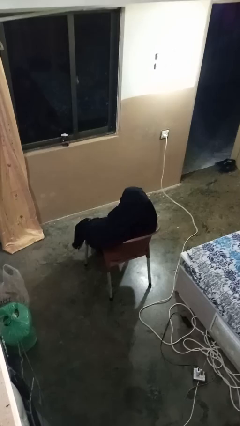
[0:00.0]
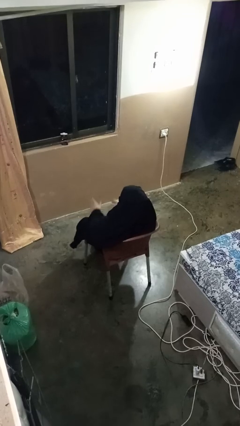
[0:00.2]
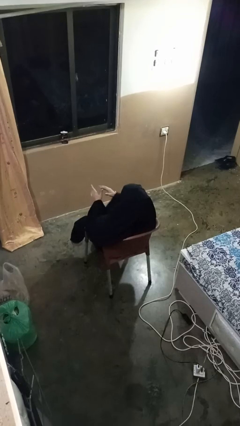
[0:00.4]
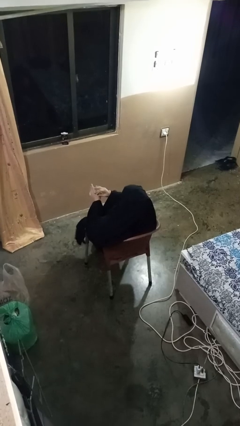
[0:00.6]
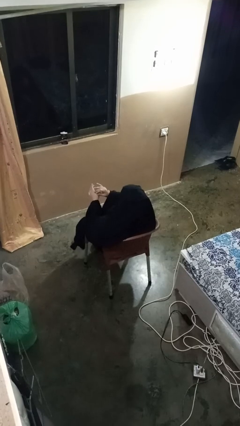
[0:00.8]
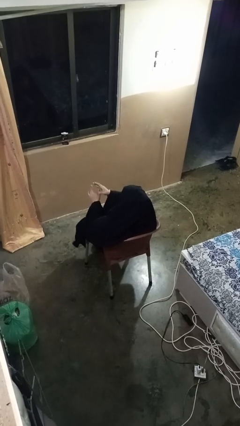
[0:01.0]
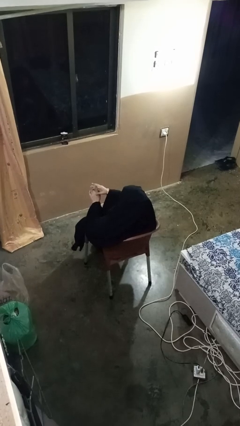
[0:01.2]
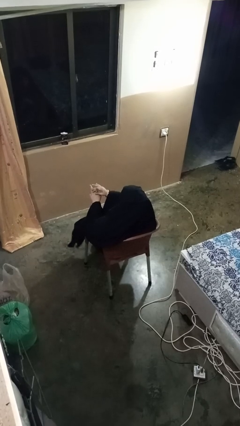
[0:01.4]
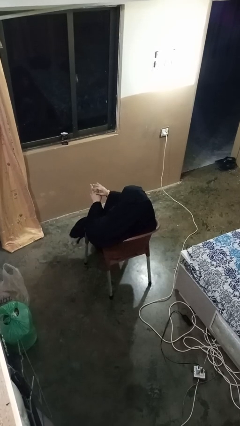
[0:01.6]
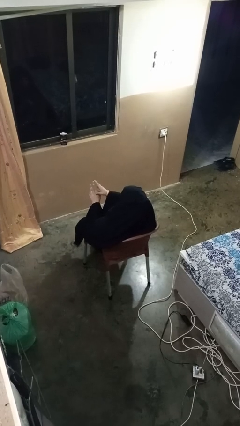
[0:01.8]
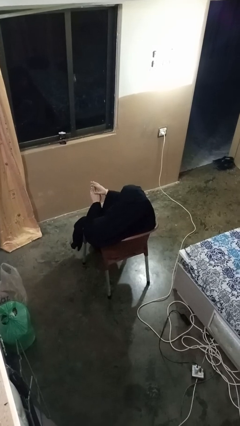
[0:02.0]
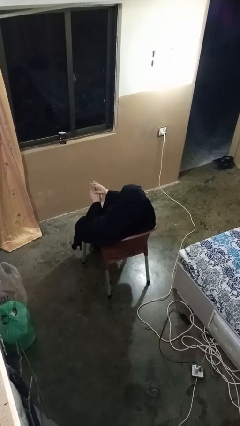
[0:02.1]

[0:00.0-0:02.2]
person cracks knuckles

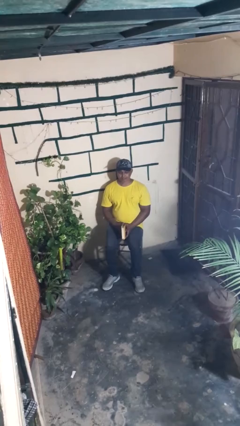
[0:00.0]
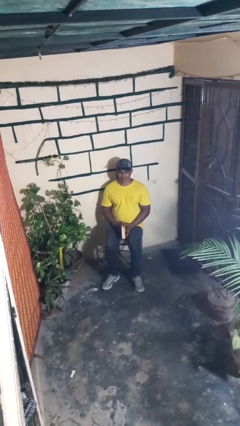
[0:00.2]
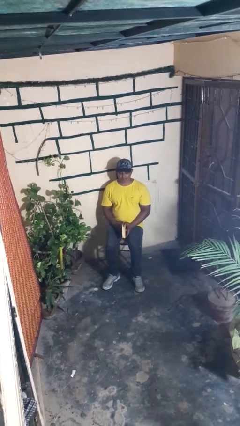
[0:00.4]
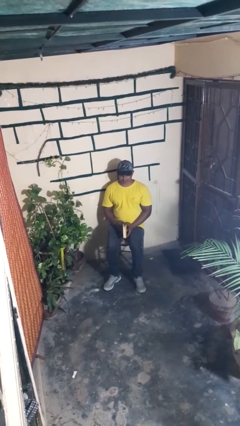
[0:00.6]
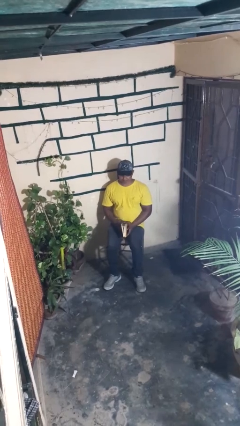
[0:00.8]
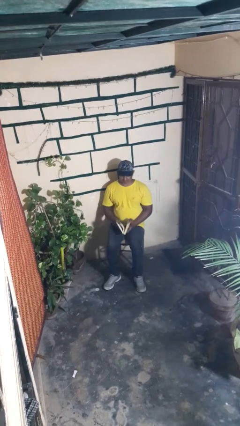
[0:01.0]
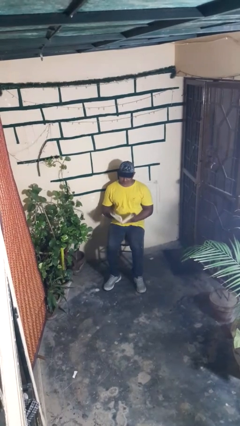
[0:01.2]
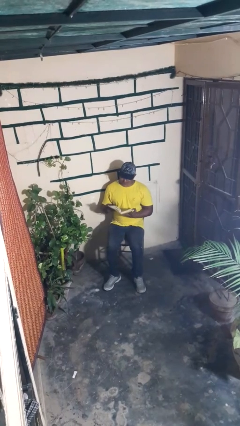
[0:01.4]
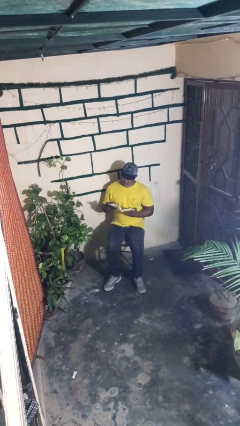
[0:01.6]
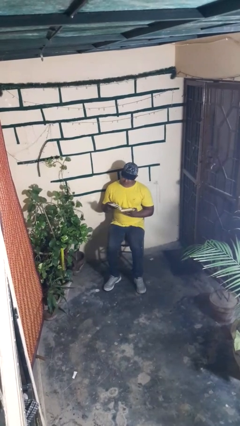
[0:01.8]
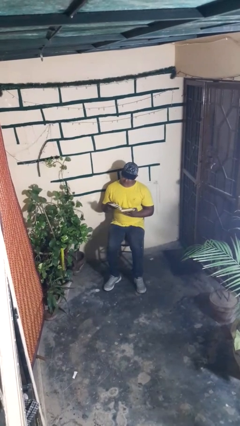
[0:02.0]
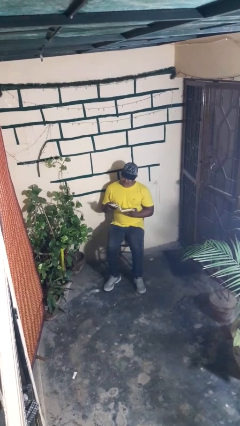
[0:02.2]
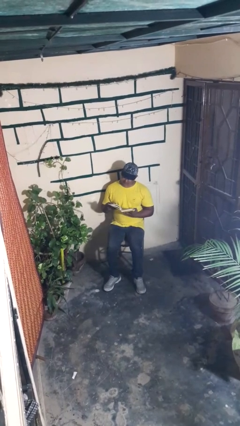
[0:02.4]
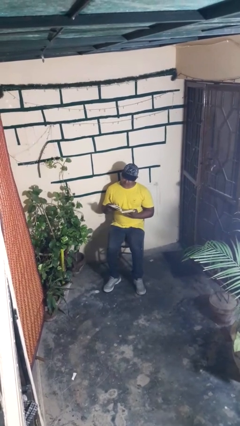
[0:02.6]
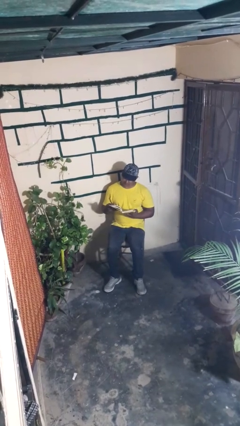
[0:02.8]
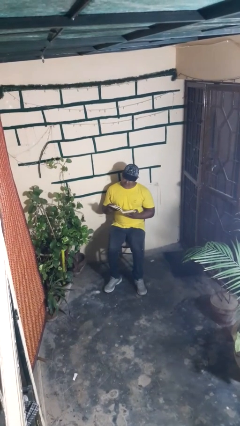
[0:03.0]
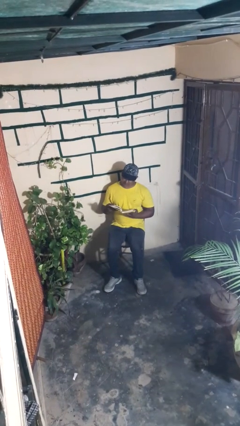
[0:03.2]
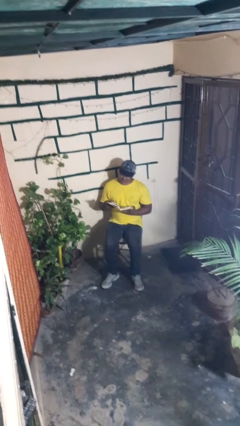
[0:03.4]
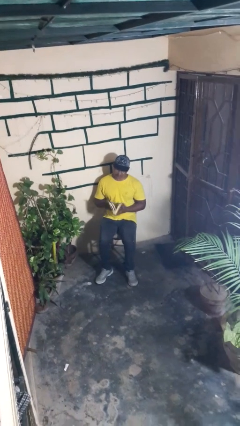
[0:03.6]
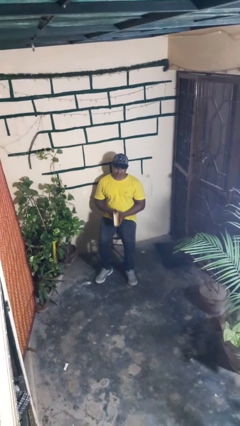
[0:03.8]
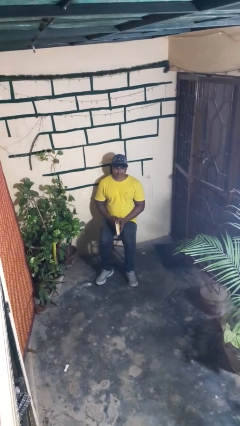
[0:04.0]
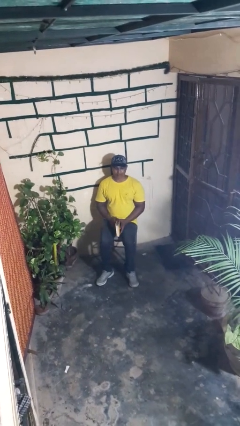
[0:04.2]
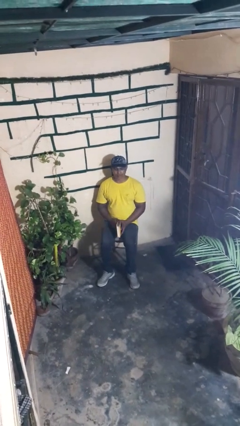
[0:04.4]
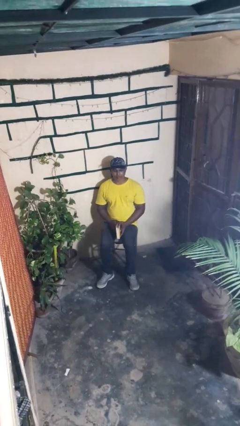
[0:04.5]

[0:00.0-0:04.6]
person reads book

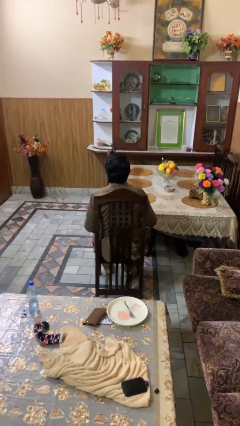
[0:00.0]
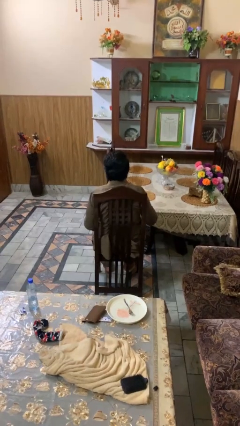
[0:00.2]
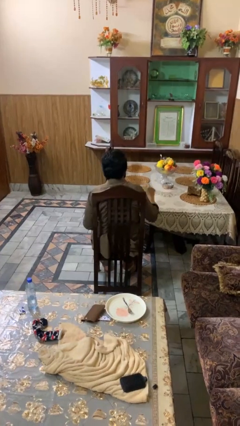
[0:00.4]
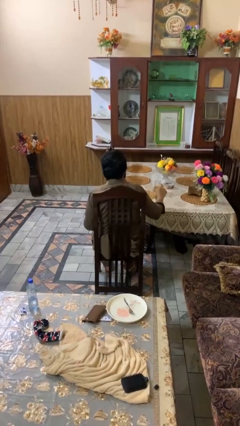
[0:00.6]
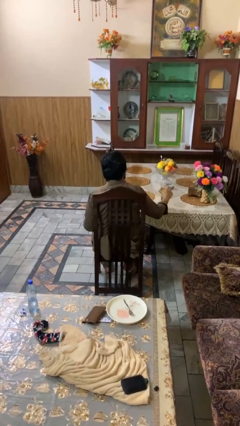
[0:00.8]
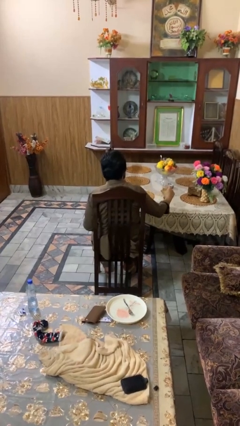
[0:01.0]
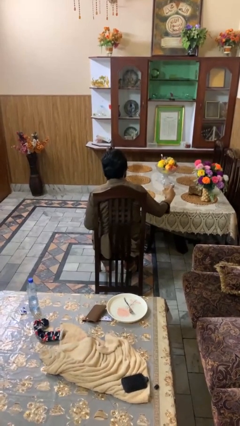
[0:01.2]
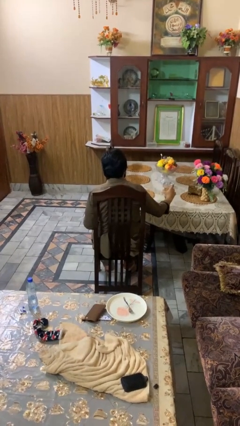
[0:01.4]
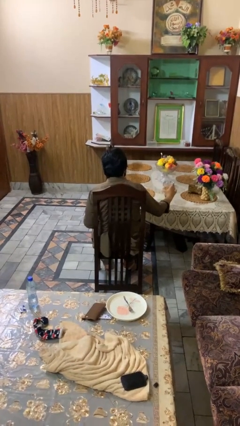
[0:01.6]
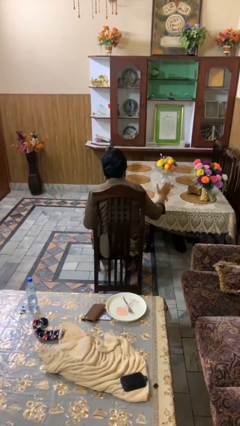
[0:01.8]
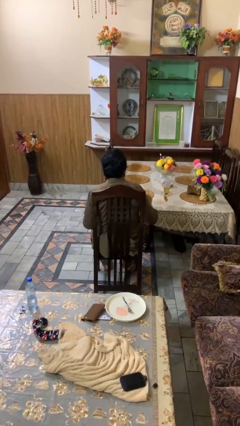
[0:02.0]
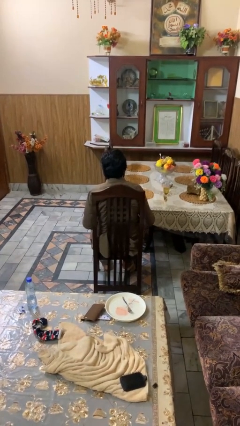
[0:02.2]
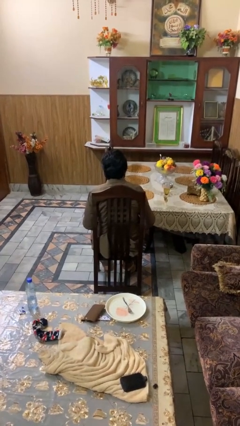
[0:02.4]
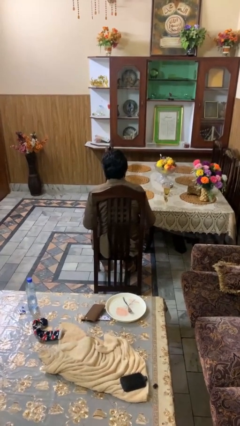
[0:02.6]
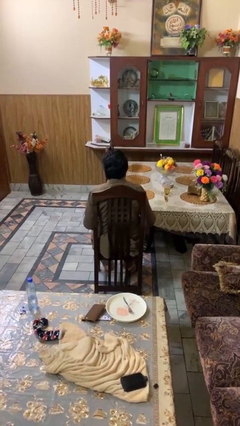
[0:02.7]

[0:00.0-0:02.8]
person puts down object on table

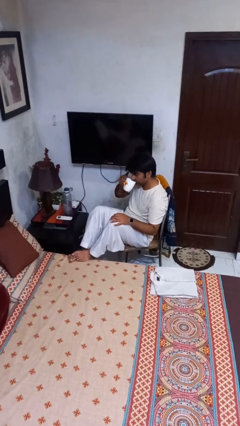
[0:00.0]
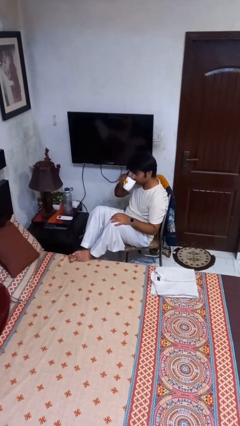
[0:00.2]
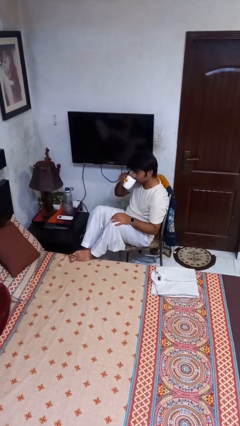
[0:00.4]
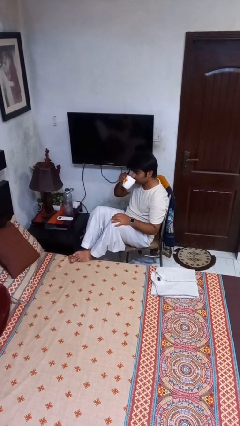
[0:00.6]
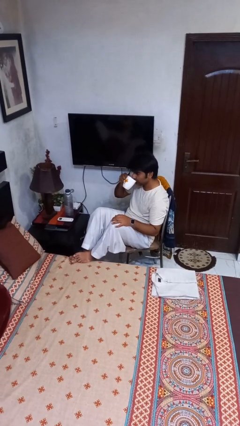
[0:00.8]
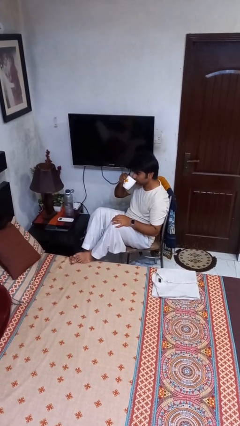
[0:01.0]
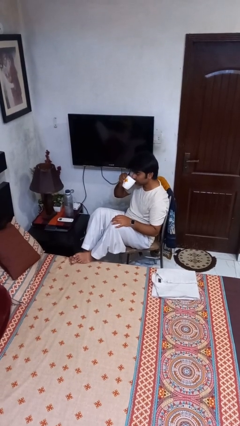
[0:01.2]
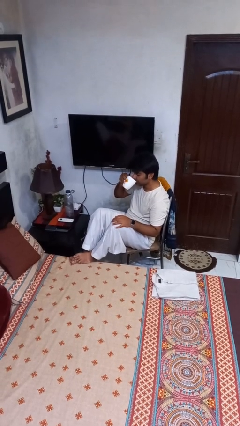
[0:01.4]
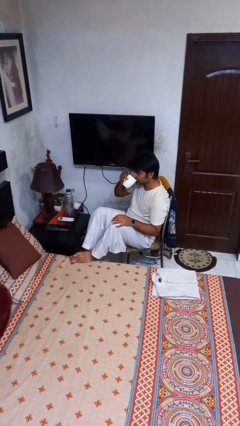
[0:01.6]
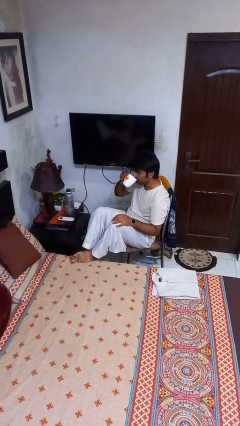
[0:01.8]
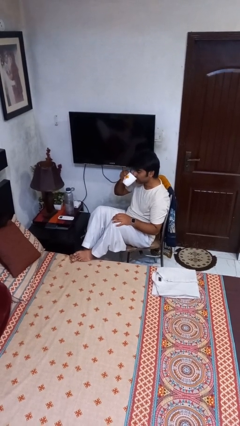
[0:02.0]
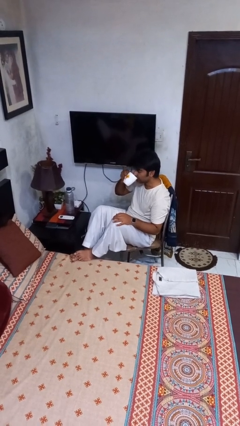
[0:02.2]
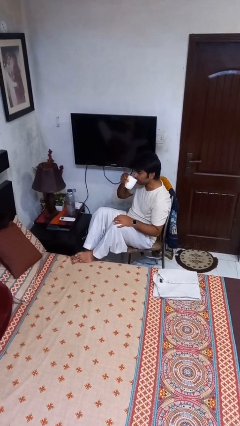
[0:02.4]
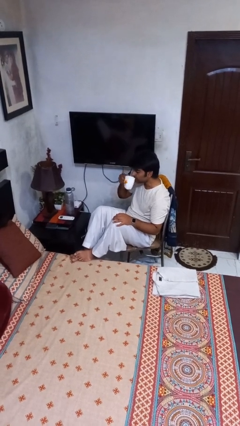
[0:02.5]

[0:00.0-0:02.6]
person drinks from mug

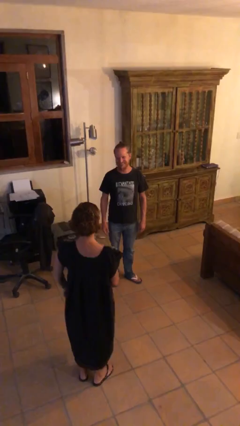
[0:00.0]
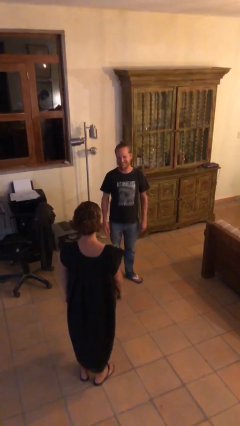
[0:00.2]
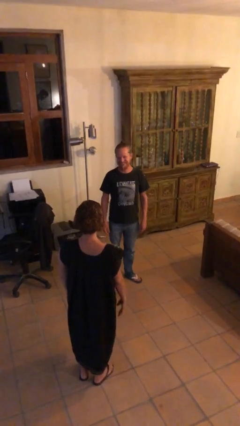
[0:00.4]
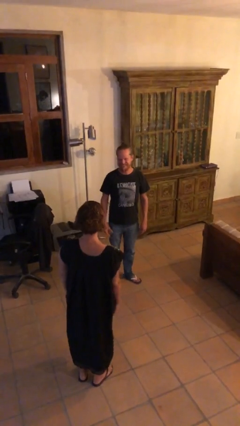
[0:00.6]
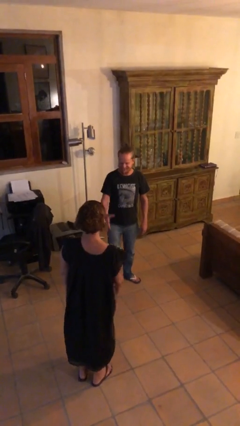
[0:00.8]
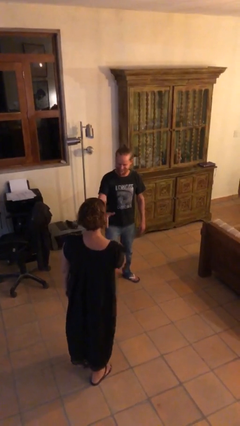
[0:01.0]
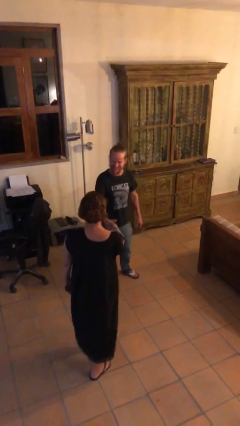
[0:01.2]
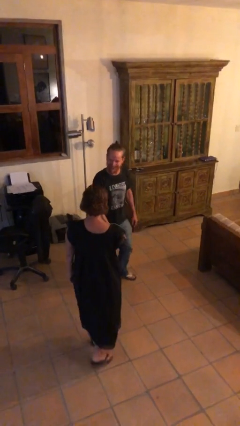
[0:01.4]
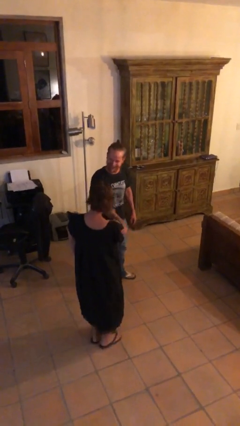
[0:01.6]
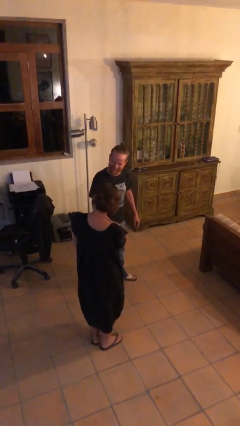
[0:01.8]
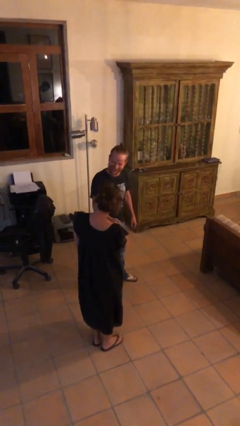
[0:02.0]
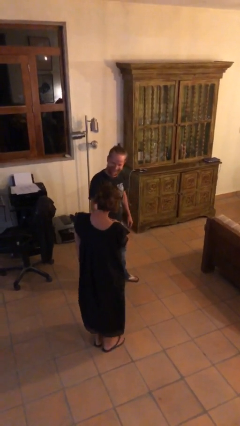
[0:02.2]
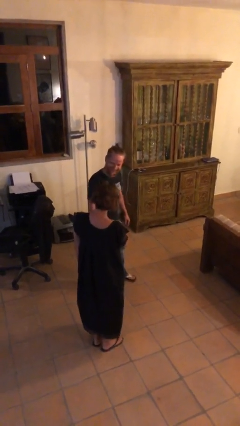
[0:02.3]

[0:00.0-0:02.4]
person shakes hand

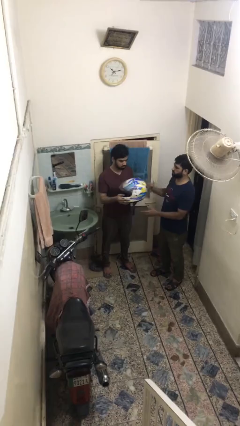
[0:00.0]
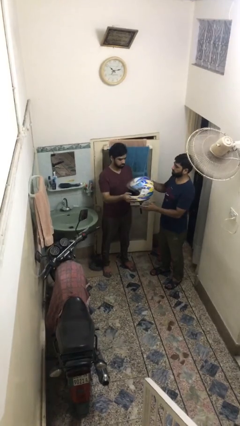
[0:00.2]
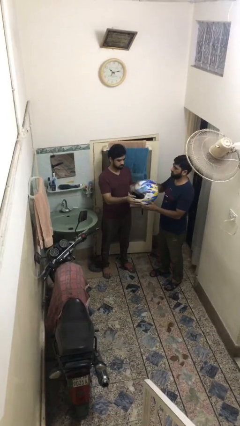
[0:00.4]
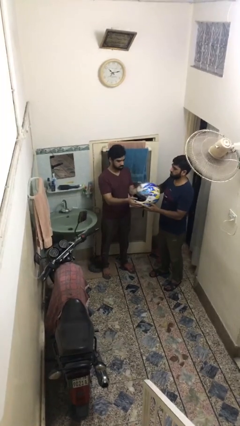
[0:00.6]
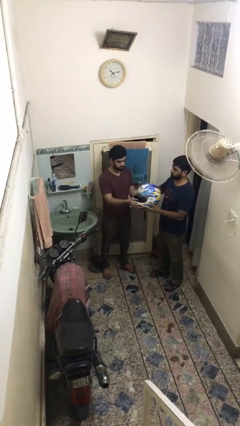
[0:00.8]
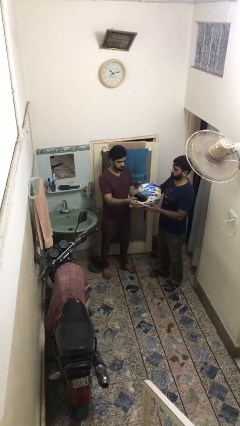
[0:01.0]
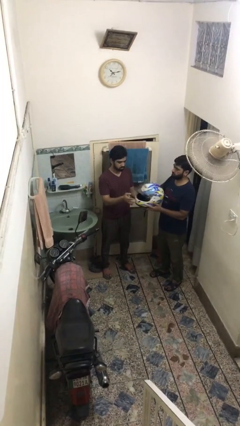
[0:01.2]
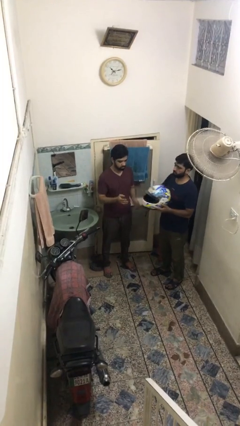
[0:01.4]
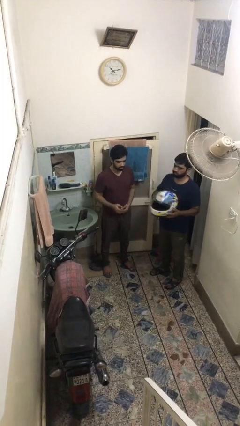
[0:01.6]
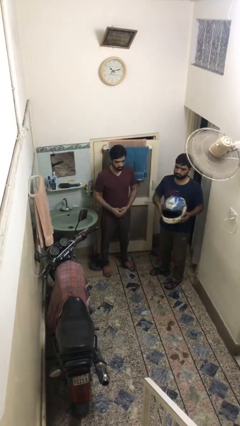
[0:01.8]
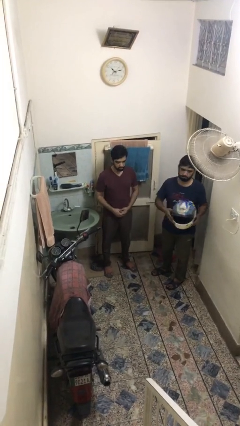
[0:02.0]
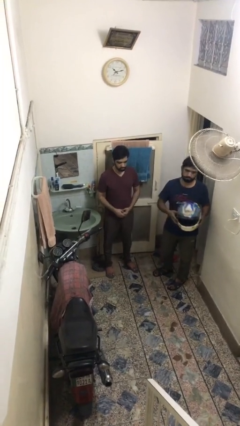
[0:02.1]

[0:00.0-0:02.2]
person transfers object to person

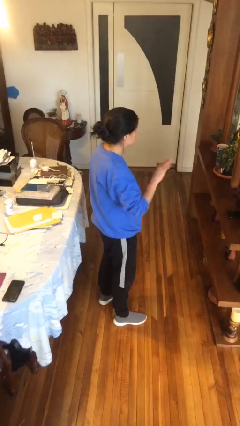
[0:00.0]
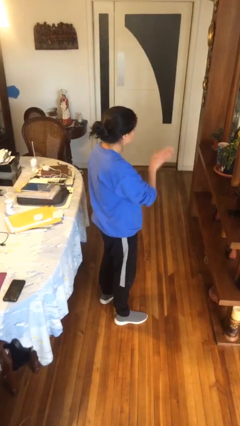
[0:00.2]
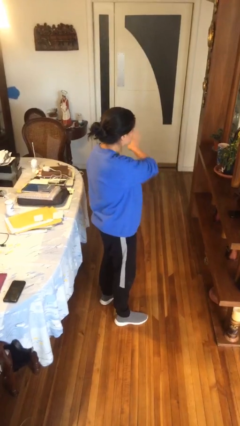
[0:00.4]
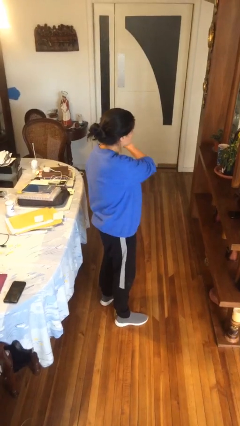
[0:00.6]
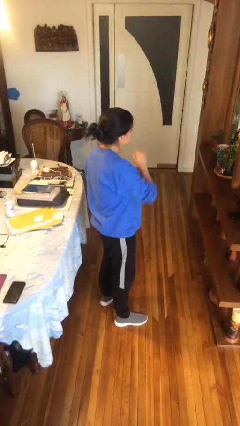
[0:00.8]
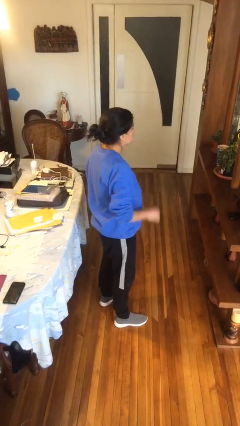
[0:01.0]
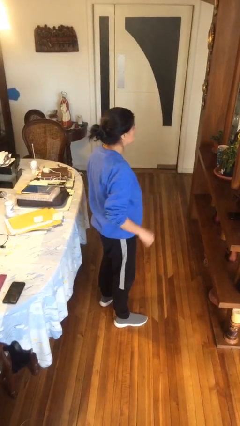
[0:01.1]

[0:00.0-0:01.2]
person gestures swipe left
